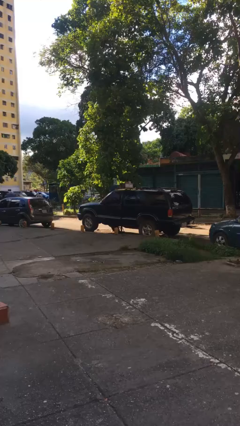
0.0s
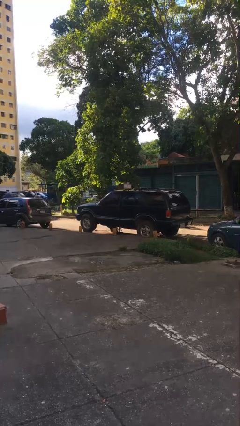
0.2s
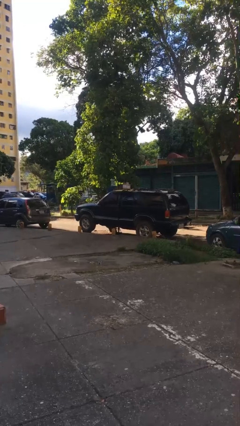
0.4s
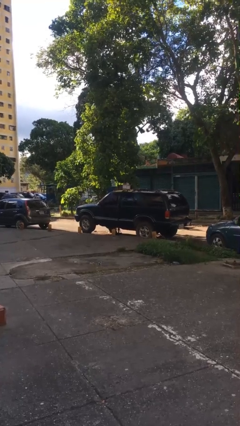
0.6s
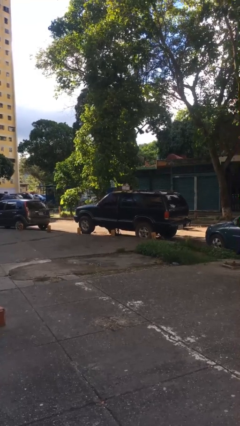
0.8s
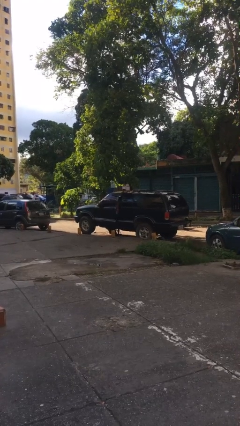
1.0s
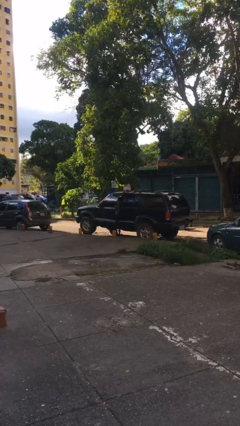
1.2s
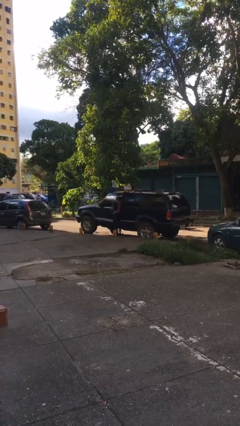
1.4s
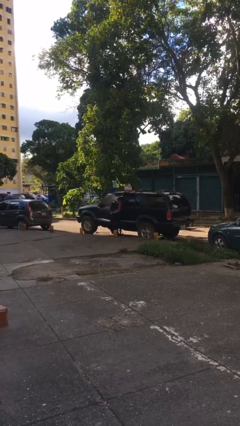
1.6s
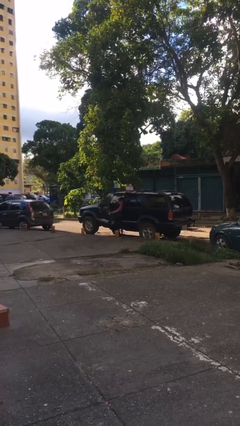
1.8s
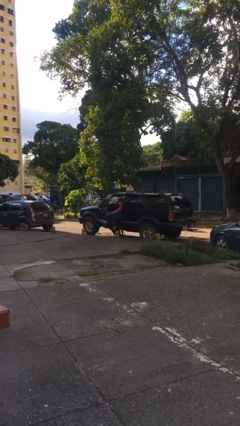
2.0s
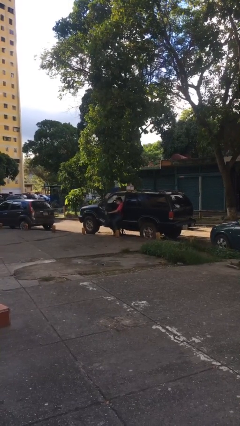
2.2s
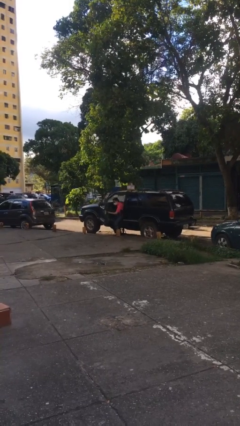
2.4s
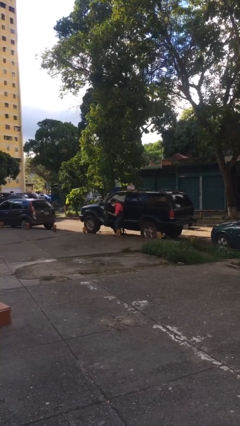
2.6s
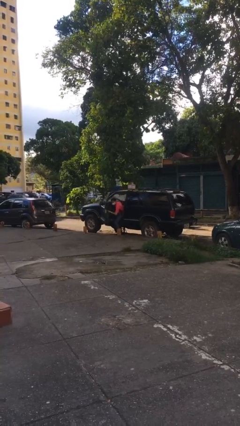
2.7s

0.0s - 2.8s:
person opens car door

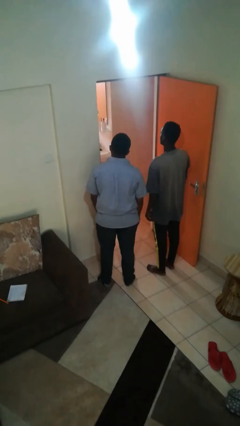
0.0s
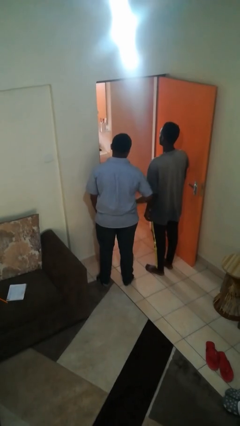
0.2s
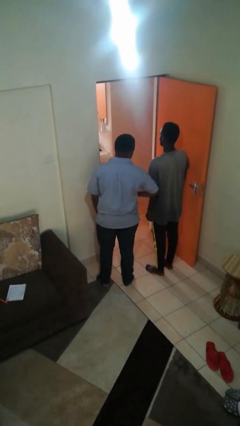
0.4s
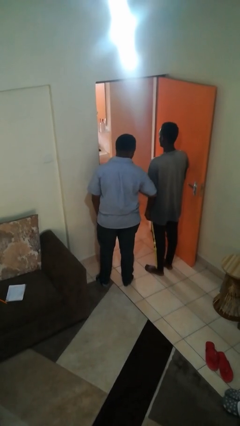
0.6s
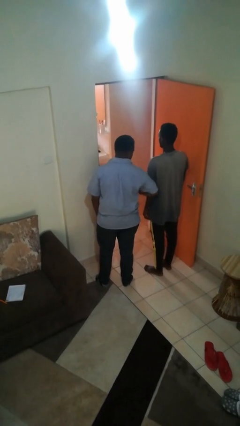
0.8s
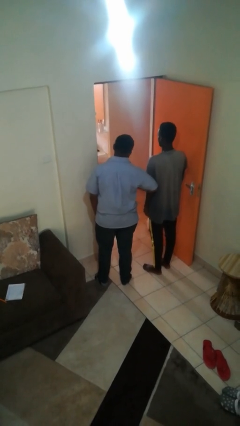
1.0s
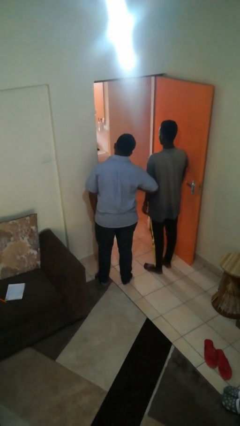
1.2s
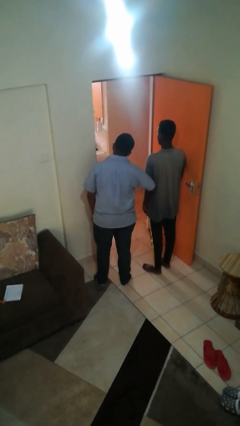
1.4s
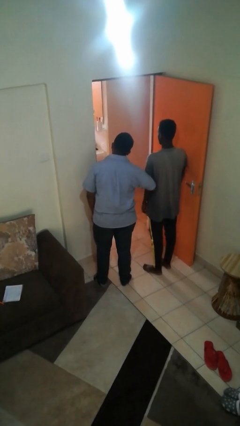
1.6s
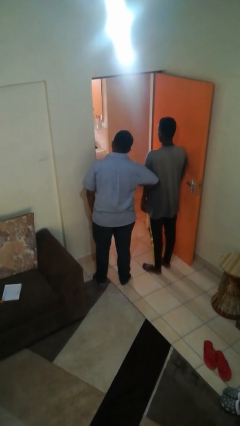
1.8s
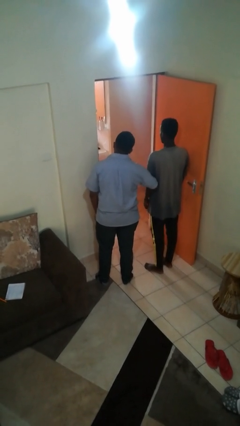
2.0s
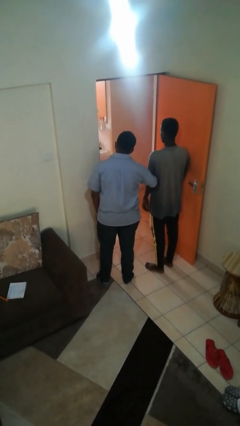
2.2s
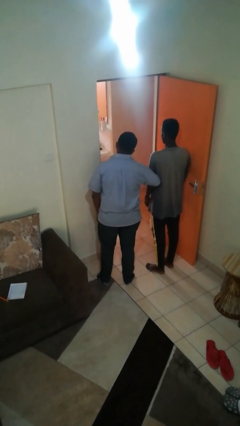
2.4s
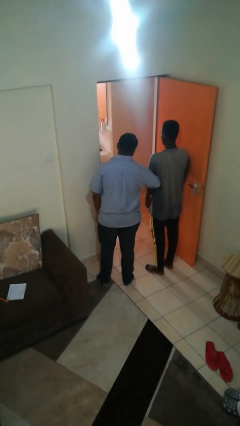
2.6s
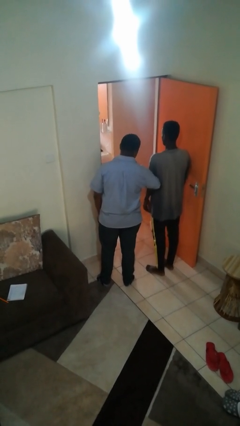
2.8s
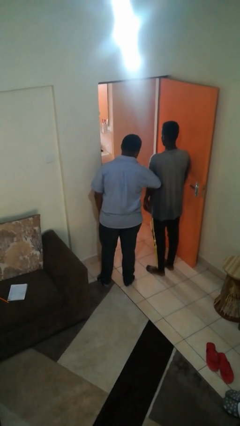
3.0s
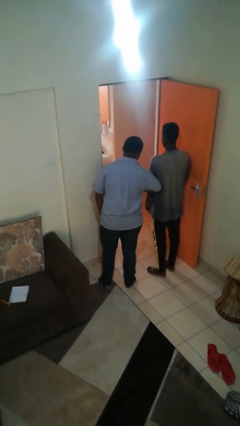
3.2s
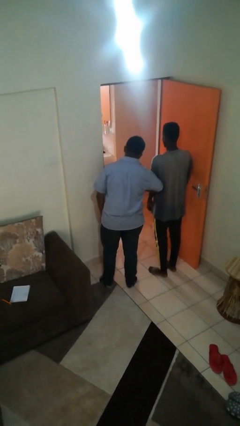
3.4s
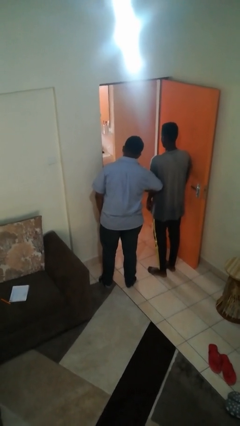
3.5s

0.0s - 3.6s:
person nudges person with elbow

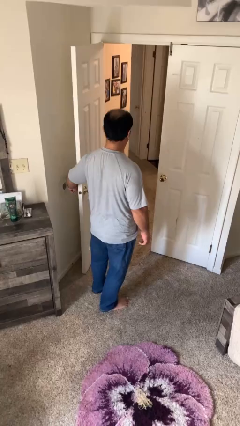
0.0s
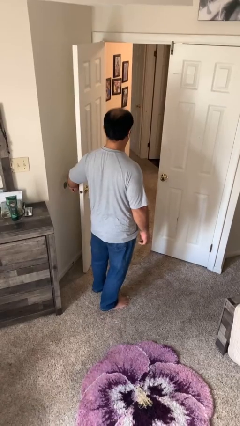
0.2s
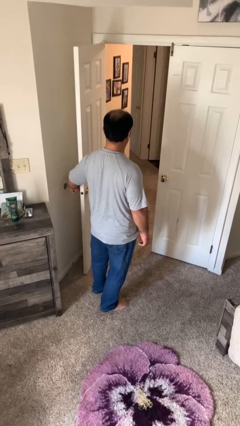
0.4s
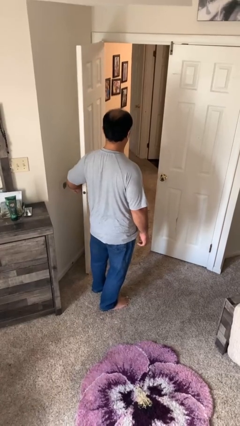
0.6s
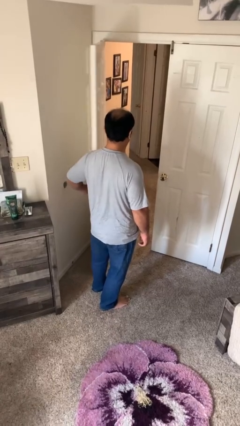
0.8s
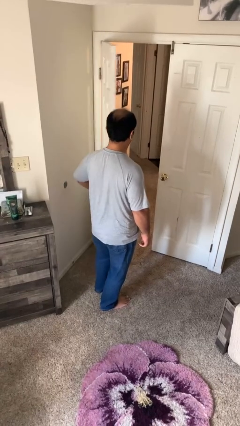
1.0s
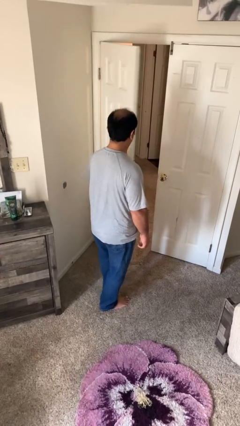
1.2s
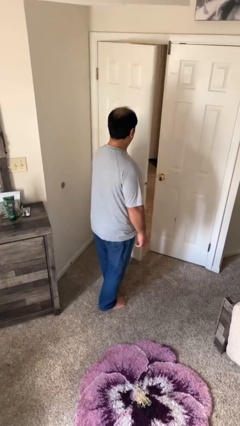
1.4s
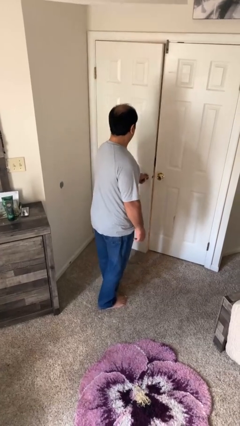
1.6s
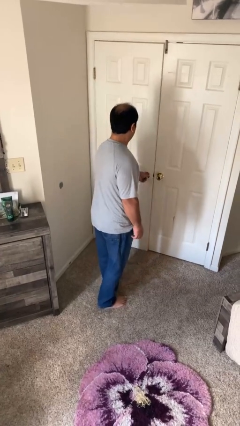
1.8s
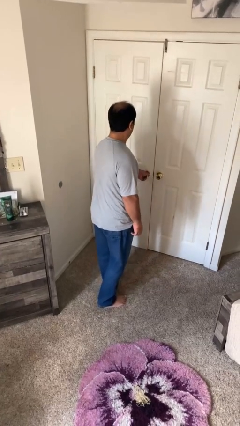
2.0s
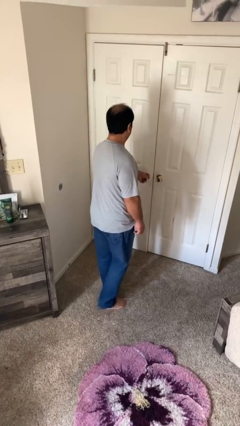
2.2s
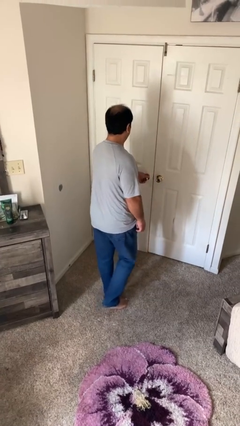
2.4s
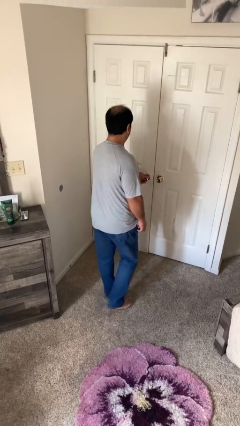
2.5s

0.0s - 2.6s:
person closes facility door

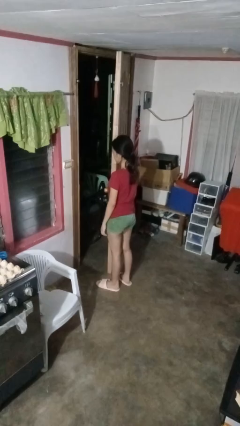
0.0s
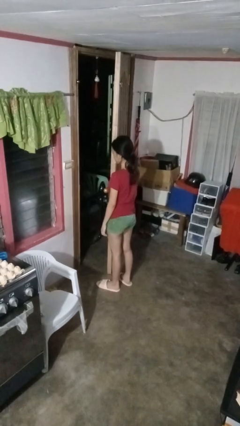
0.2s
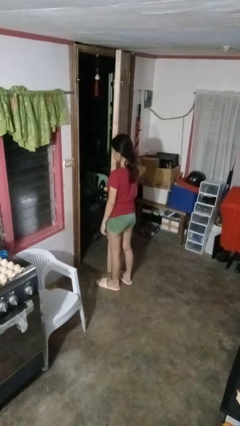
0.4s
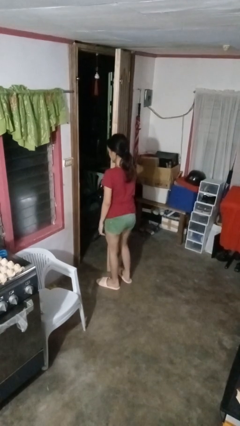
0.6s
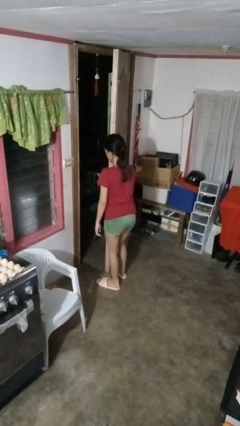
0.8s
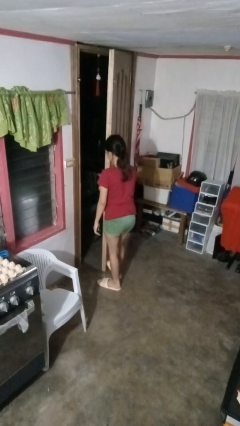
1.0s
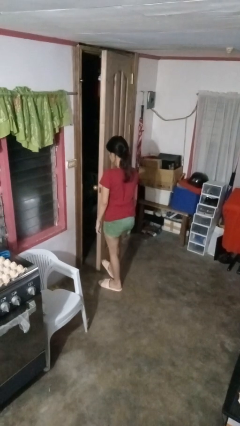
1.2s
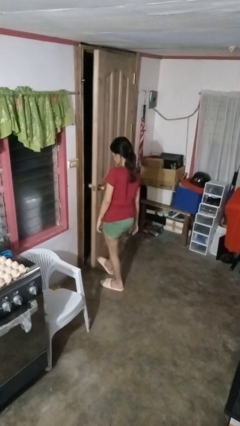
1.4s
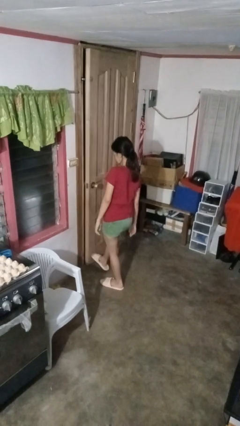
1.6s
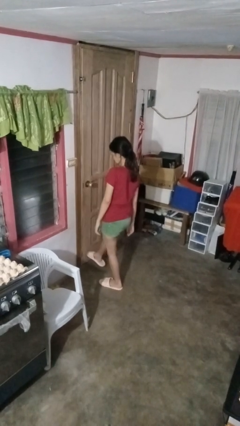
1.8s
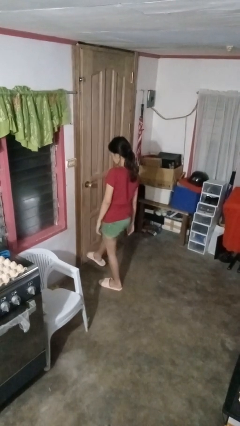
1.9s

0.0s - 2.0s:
person closes door with foot

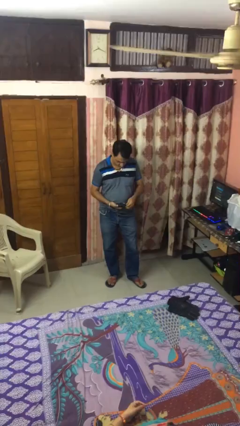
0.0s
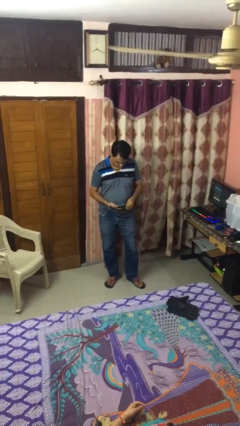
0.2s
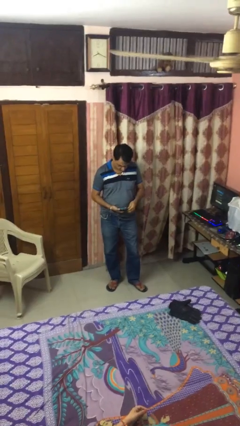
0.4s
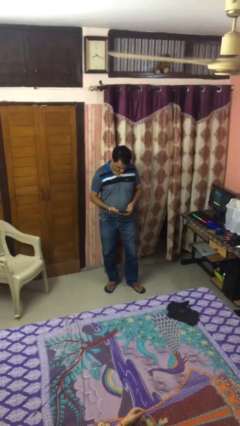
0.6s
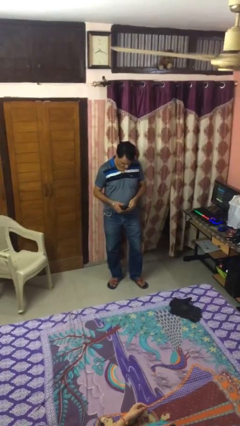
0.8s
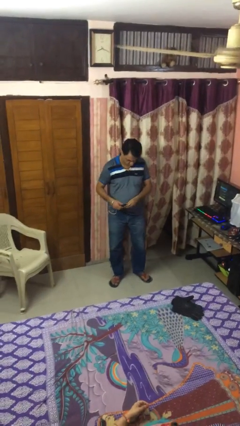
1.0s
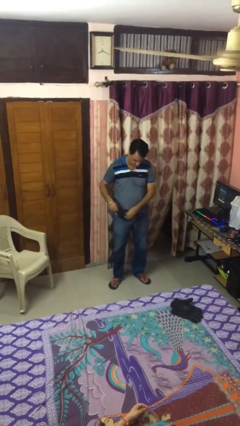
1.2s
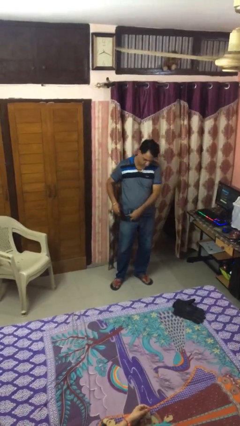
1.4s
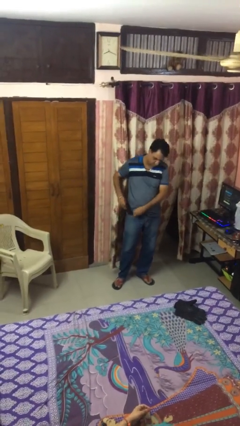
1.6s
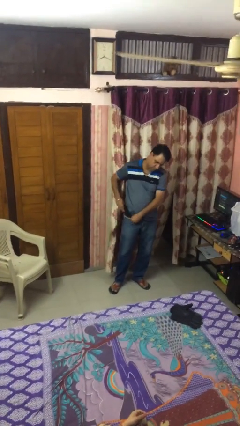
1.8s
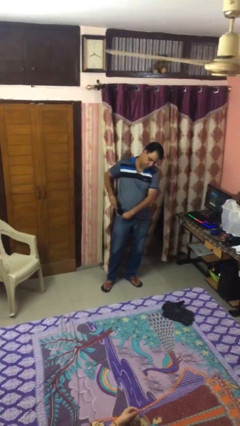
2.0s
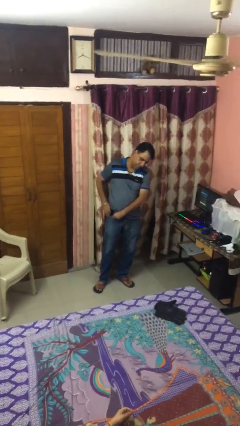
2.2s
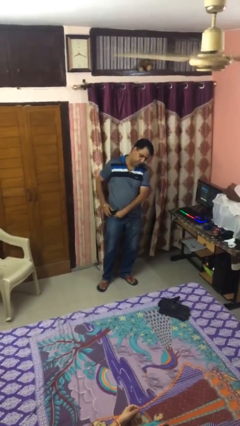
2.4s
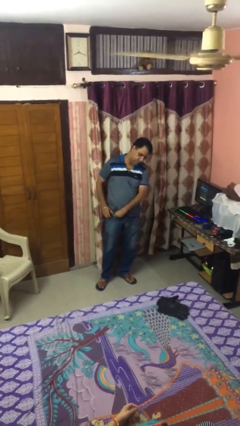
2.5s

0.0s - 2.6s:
person puts phone into pocket

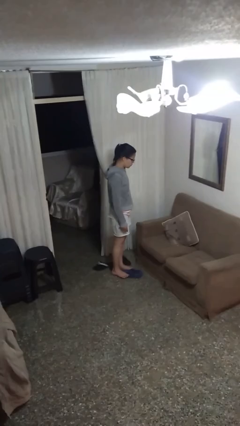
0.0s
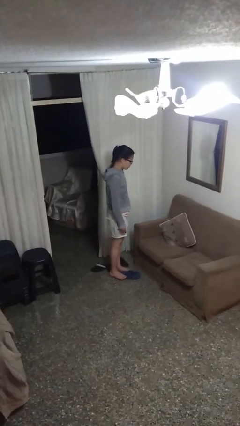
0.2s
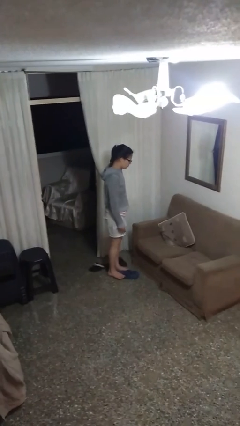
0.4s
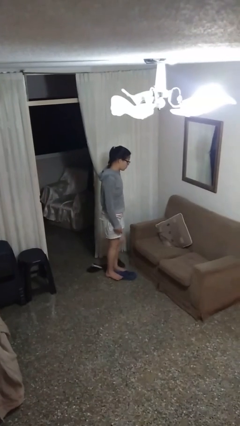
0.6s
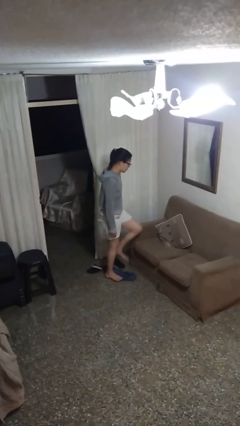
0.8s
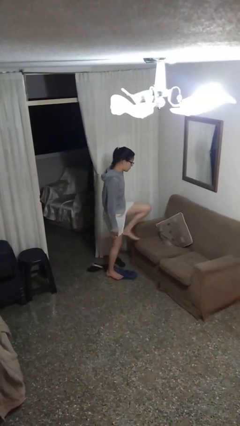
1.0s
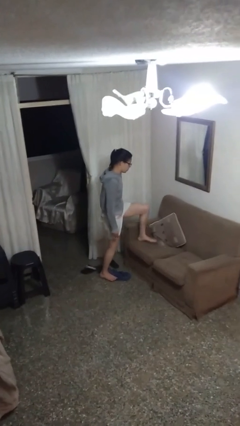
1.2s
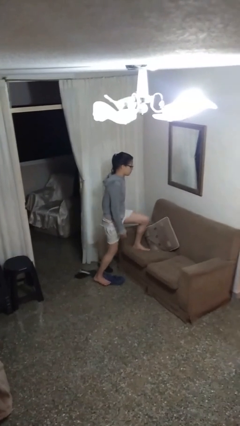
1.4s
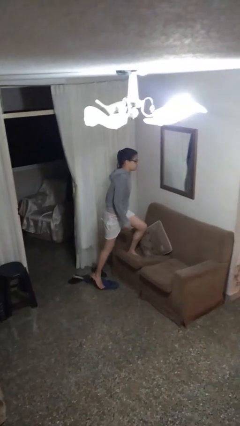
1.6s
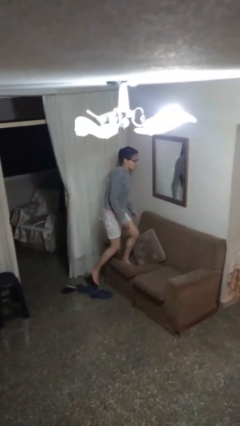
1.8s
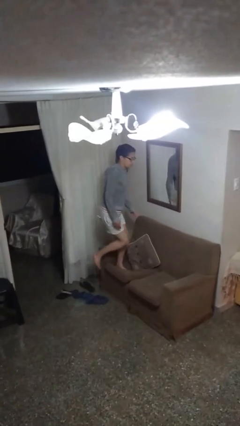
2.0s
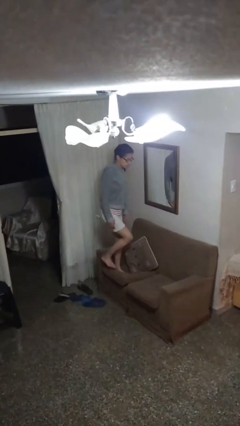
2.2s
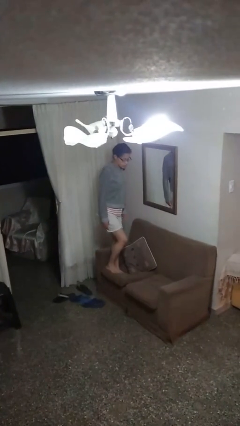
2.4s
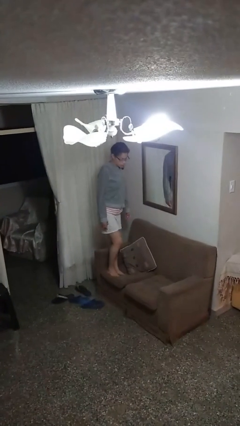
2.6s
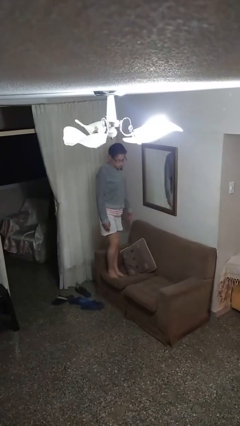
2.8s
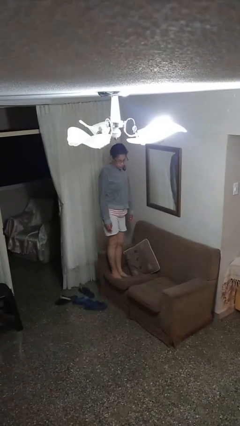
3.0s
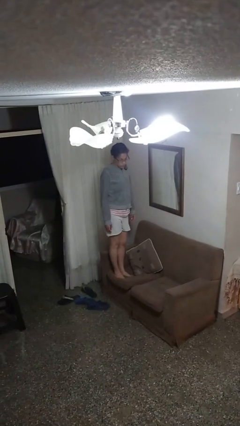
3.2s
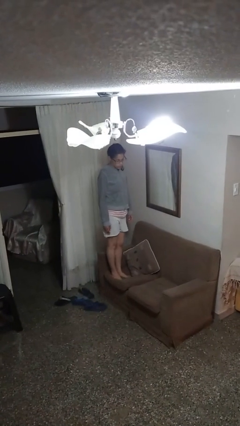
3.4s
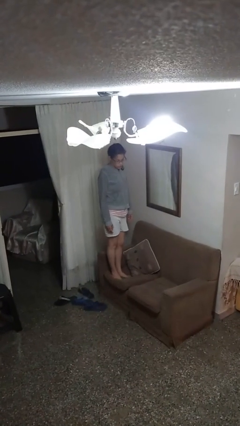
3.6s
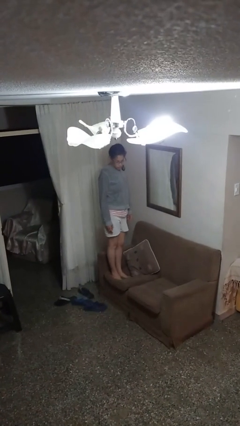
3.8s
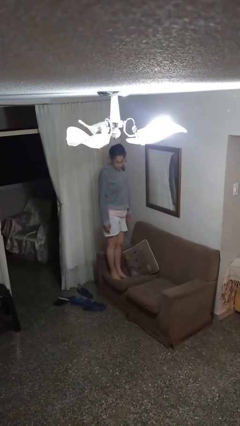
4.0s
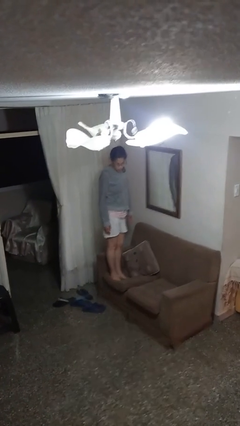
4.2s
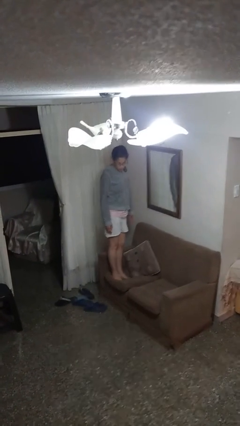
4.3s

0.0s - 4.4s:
person climbs on couch
